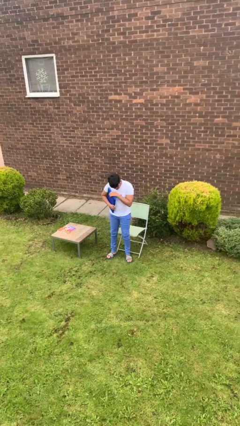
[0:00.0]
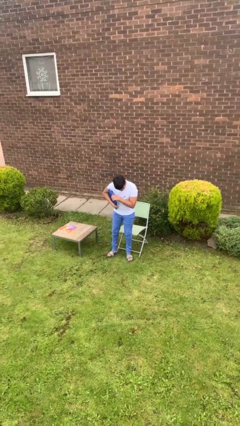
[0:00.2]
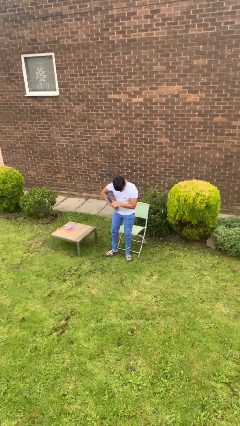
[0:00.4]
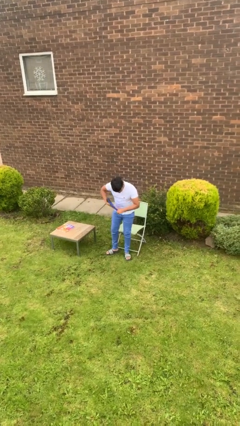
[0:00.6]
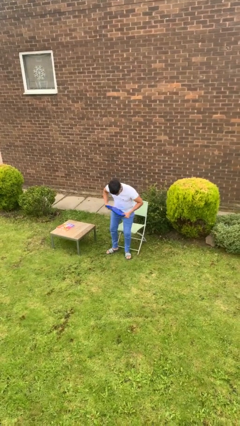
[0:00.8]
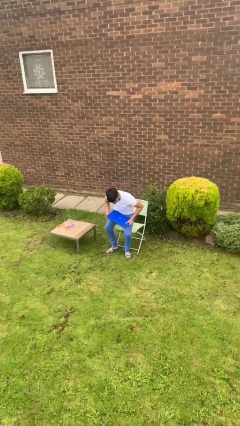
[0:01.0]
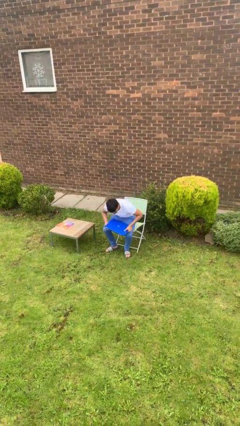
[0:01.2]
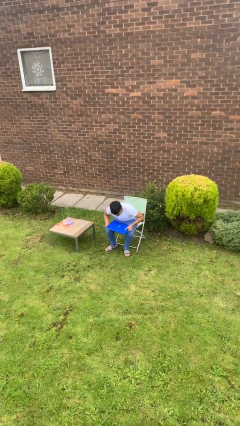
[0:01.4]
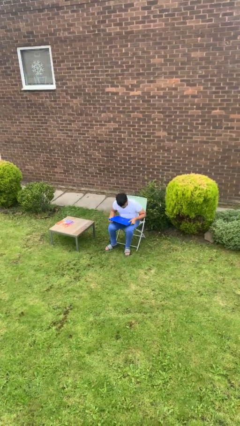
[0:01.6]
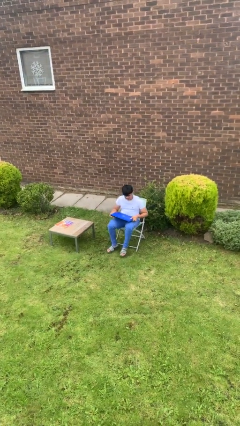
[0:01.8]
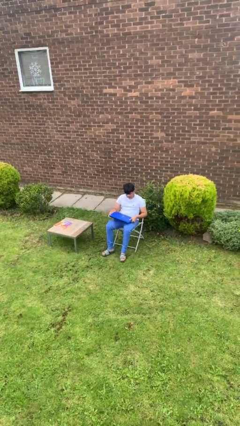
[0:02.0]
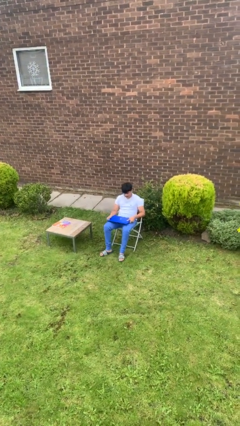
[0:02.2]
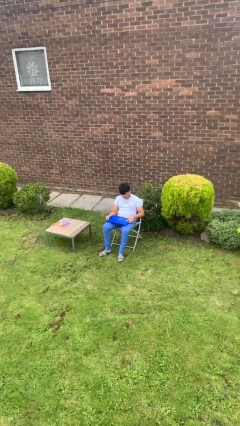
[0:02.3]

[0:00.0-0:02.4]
person sits down

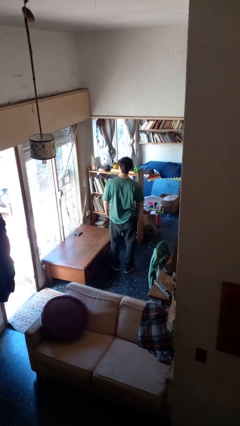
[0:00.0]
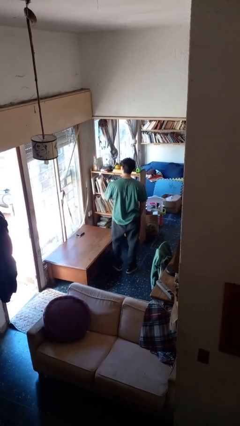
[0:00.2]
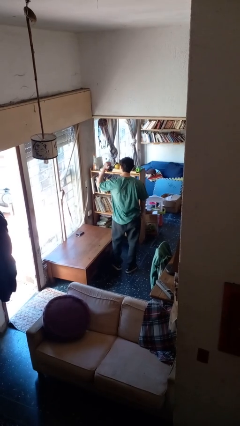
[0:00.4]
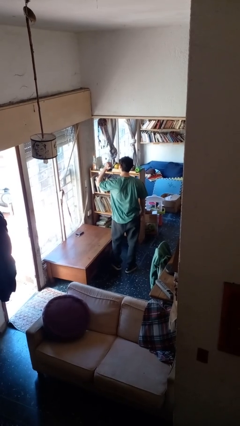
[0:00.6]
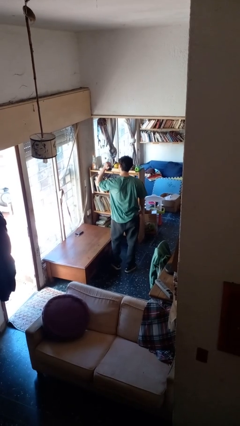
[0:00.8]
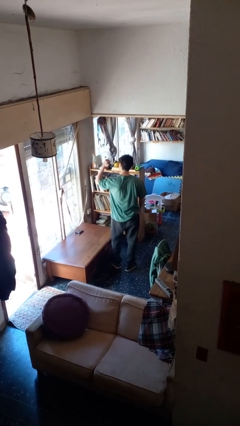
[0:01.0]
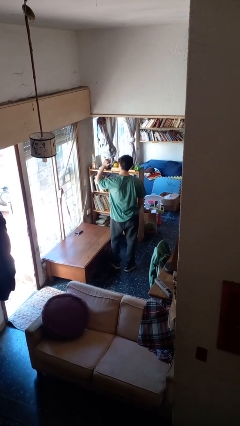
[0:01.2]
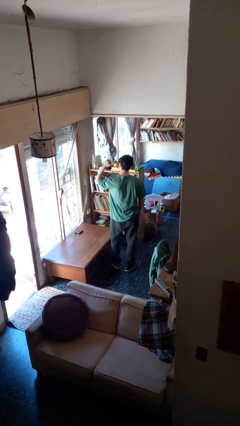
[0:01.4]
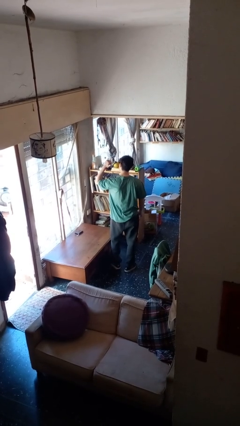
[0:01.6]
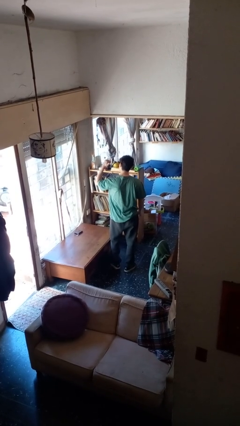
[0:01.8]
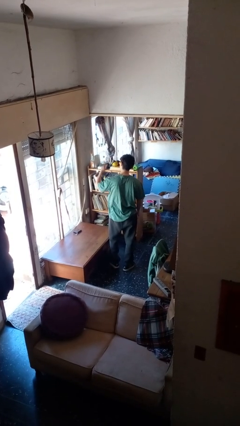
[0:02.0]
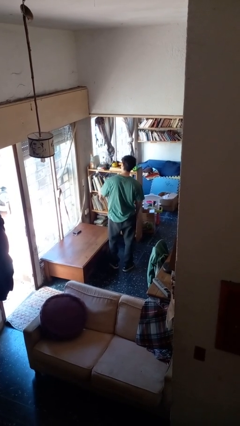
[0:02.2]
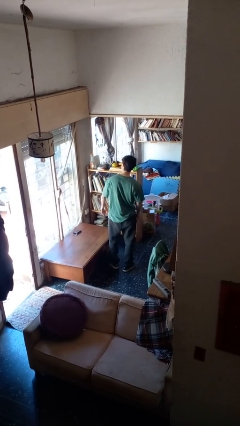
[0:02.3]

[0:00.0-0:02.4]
person gestures behind me

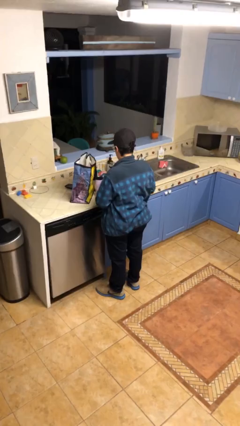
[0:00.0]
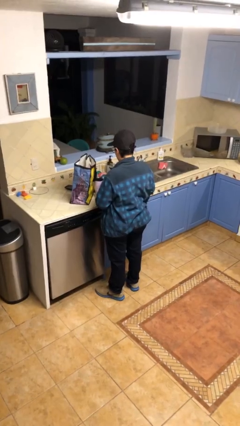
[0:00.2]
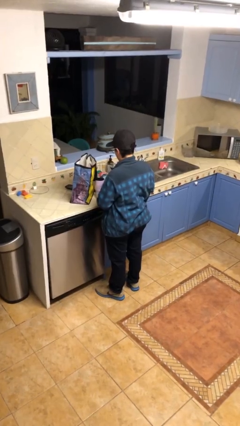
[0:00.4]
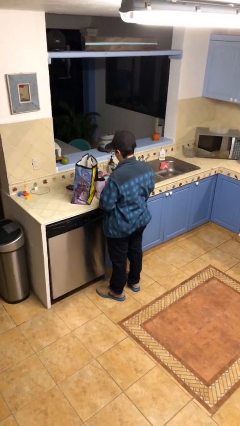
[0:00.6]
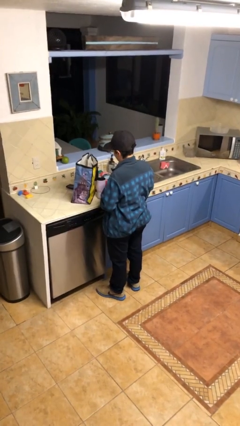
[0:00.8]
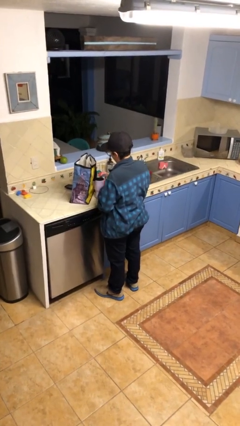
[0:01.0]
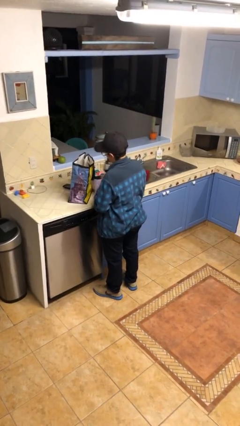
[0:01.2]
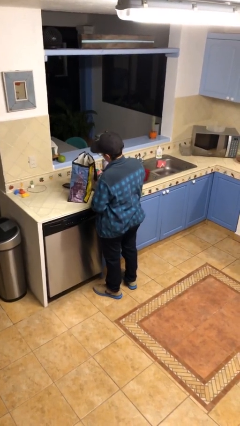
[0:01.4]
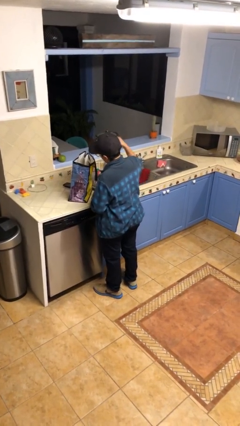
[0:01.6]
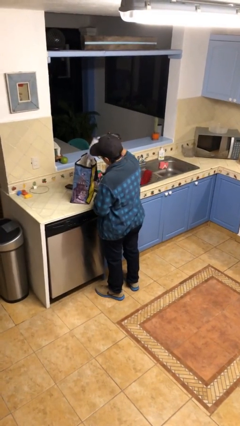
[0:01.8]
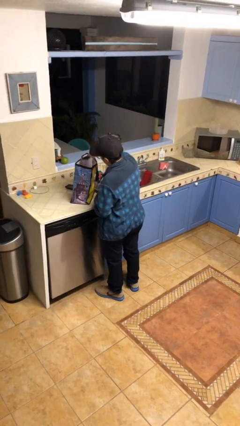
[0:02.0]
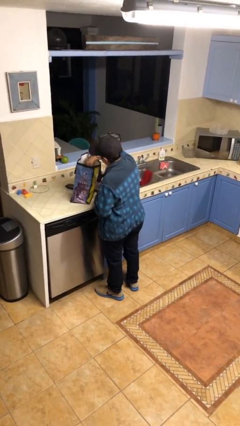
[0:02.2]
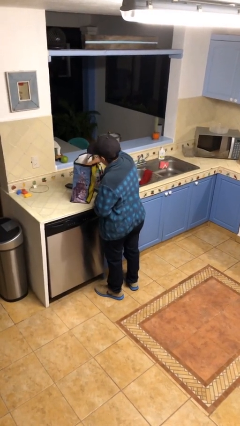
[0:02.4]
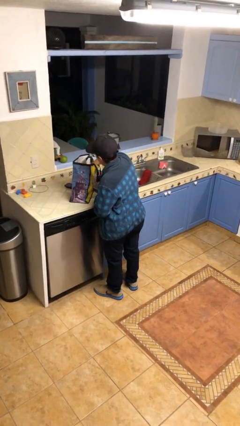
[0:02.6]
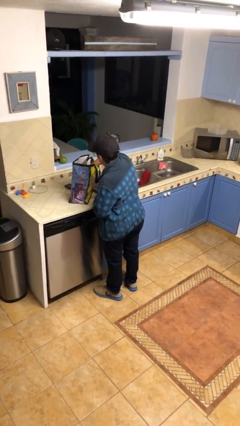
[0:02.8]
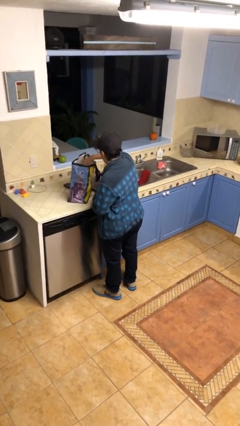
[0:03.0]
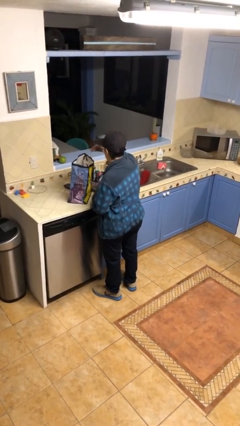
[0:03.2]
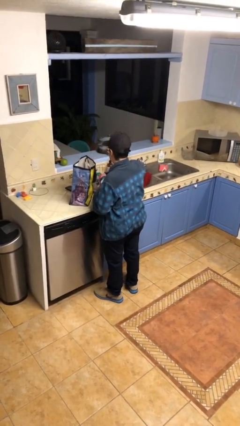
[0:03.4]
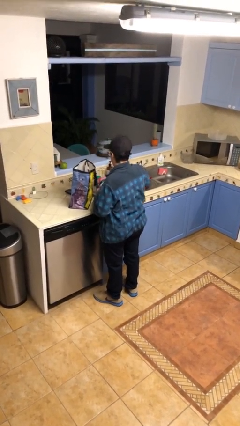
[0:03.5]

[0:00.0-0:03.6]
person puts object into bag

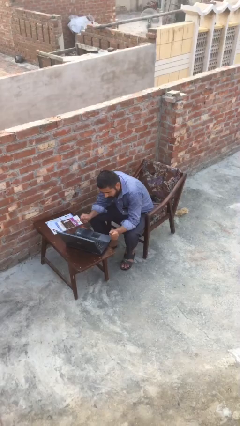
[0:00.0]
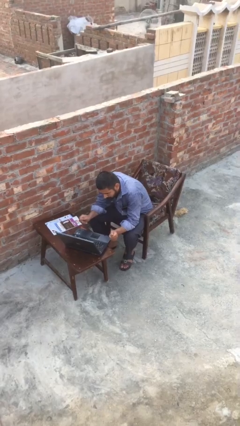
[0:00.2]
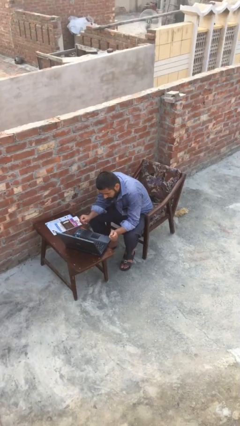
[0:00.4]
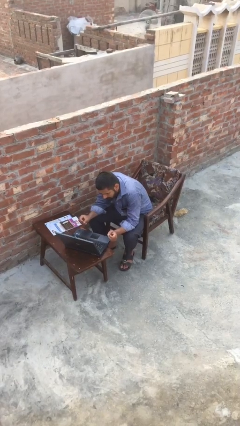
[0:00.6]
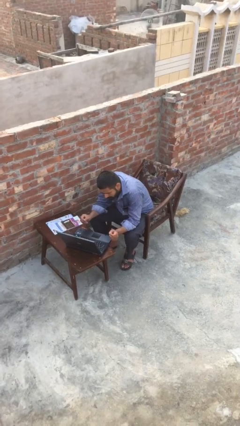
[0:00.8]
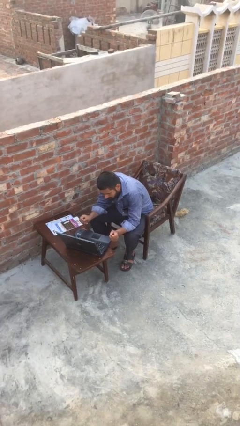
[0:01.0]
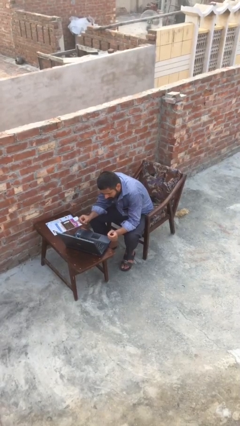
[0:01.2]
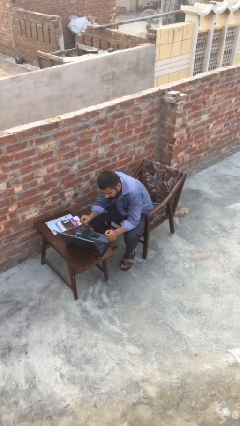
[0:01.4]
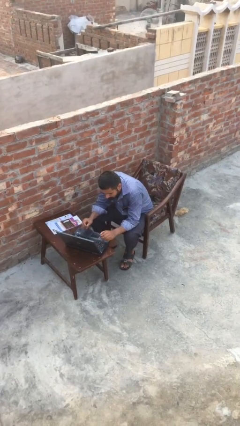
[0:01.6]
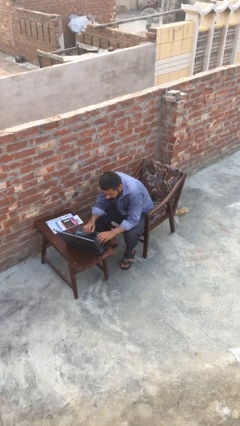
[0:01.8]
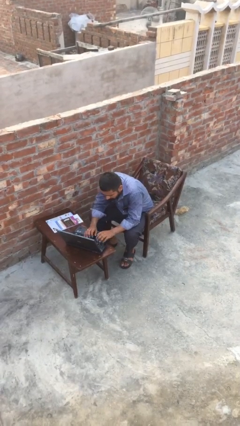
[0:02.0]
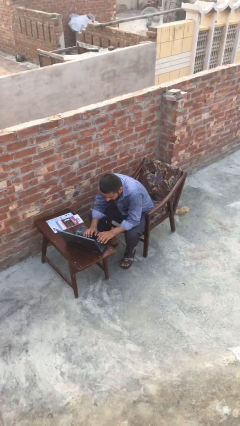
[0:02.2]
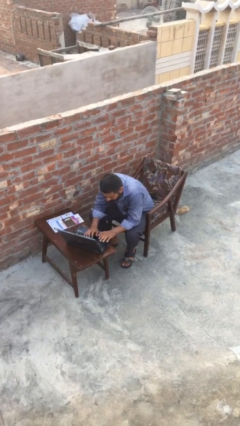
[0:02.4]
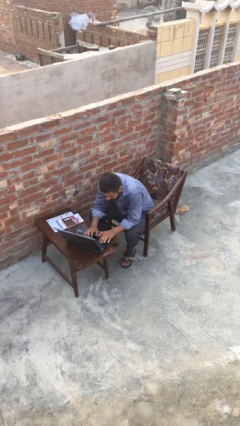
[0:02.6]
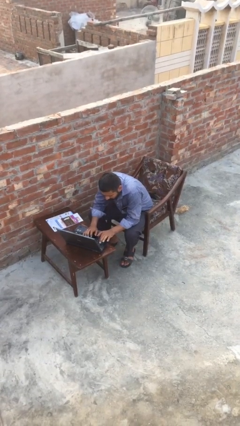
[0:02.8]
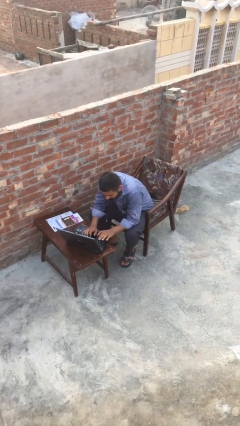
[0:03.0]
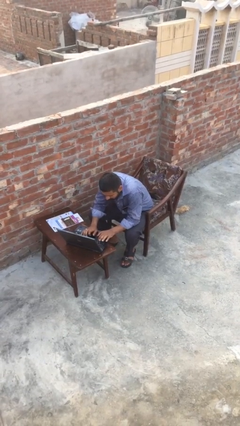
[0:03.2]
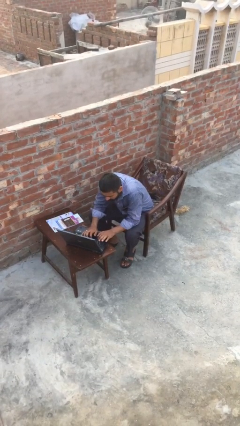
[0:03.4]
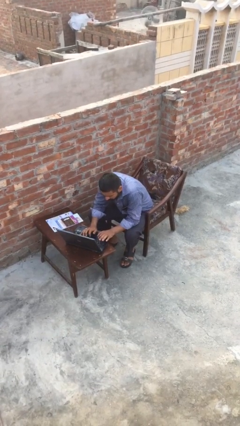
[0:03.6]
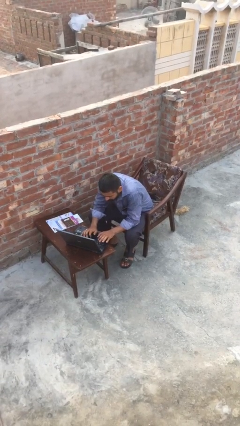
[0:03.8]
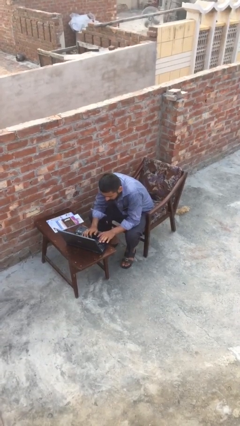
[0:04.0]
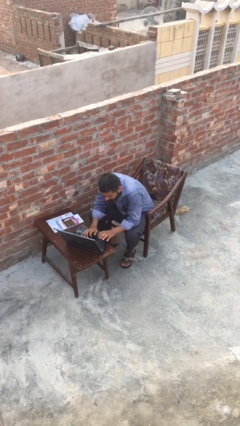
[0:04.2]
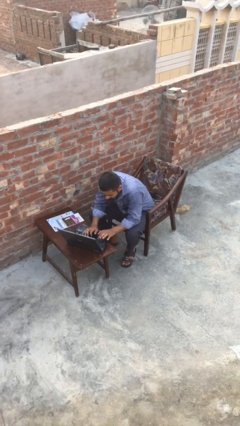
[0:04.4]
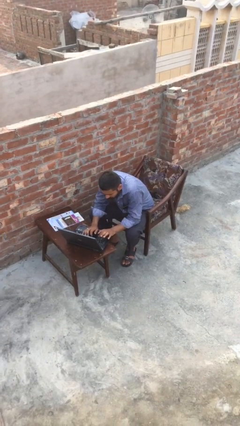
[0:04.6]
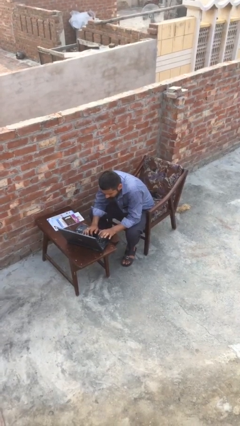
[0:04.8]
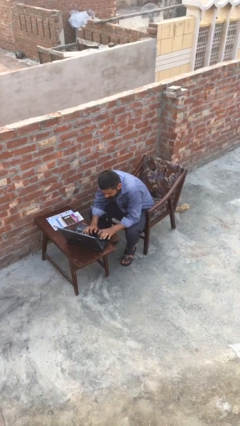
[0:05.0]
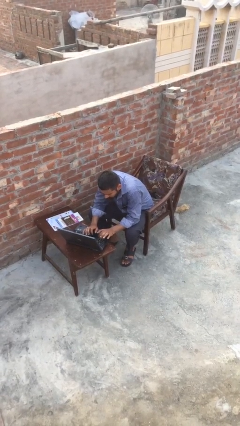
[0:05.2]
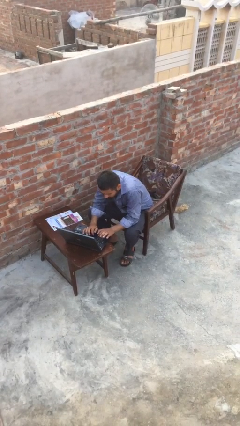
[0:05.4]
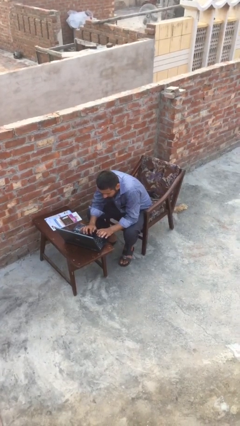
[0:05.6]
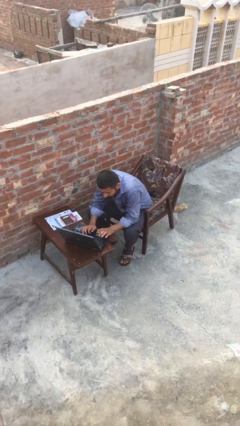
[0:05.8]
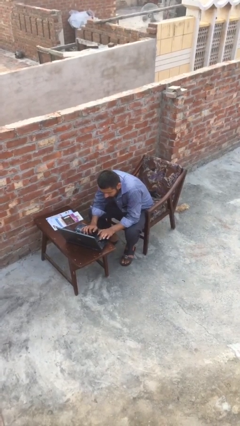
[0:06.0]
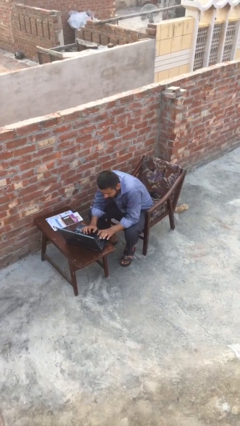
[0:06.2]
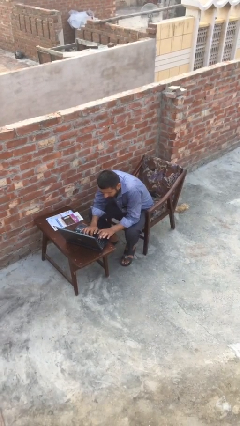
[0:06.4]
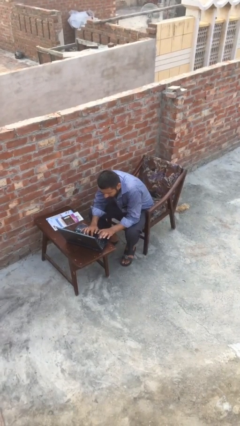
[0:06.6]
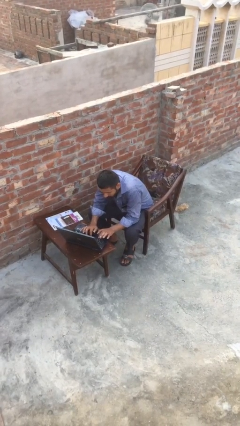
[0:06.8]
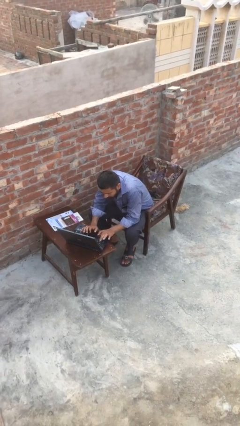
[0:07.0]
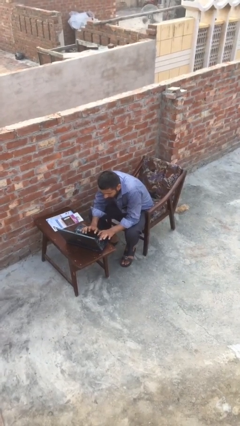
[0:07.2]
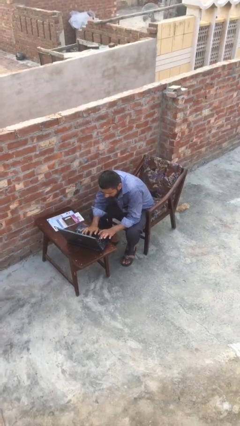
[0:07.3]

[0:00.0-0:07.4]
person interacts with laptop

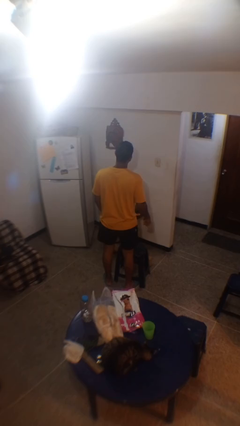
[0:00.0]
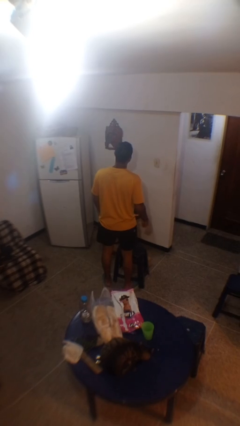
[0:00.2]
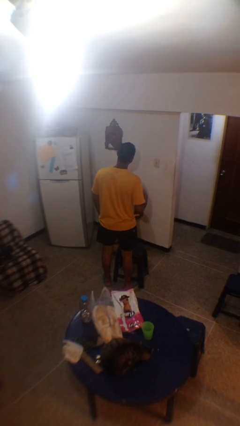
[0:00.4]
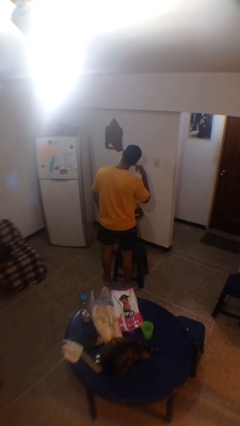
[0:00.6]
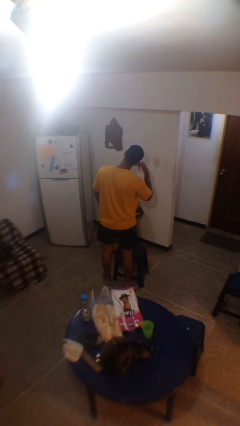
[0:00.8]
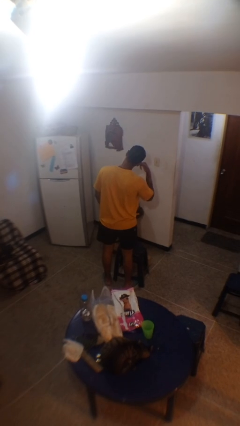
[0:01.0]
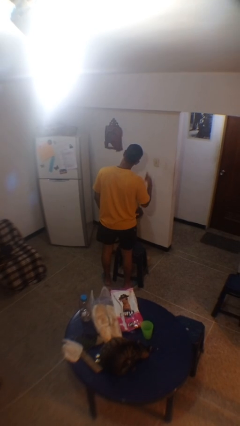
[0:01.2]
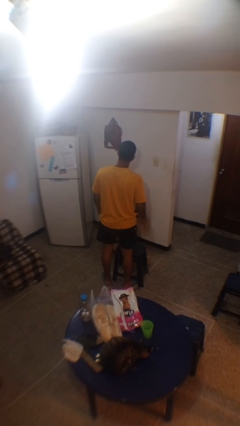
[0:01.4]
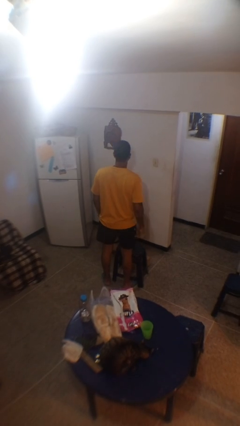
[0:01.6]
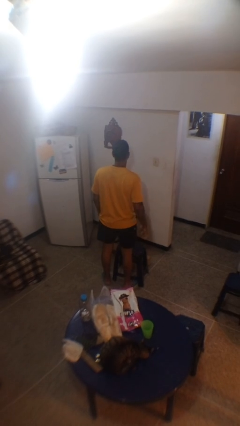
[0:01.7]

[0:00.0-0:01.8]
person gestures call me
